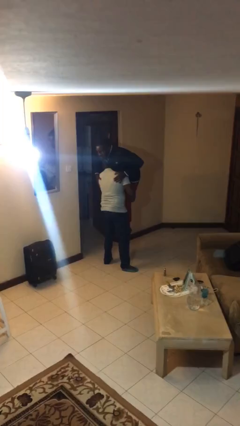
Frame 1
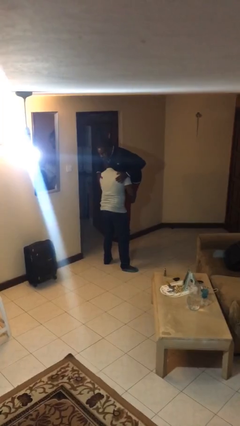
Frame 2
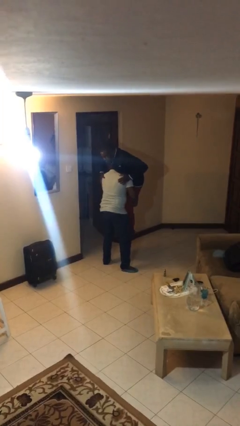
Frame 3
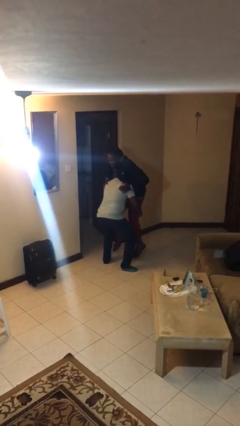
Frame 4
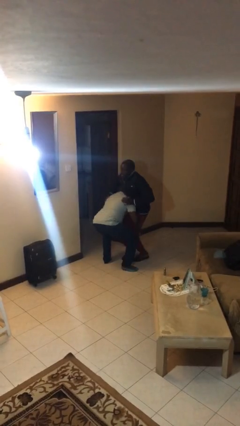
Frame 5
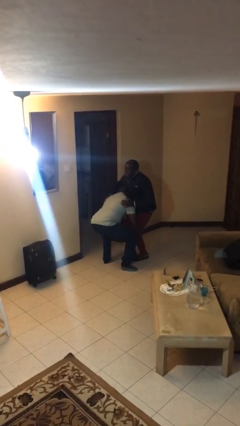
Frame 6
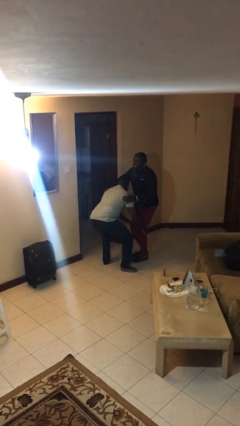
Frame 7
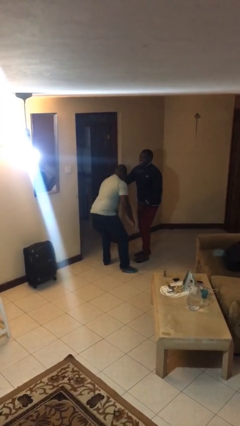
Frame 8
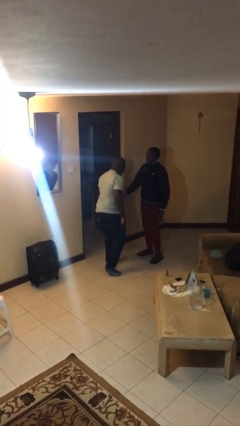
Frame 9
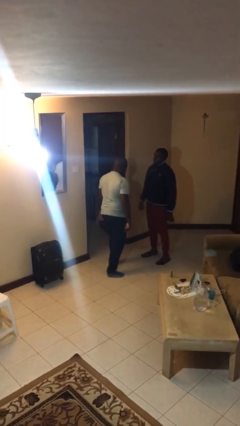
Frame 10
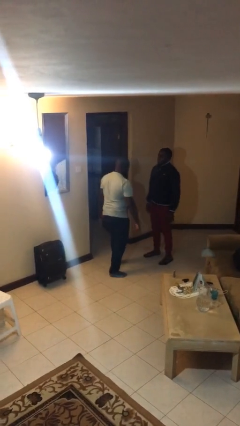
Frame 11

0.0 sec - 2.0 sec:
person puts down person

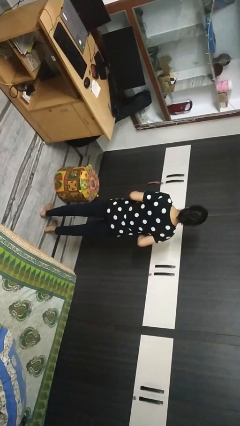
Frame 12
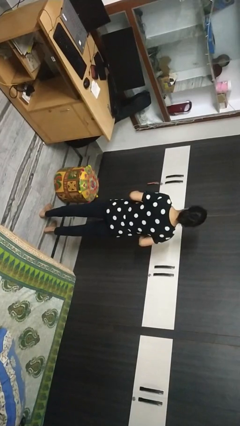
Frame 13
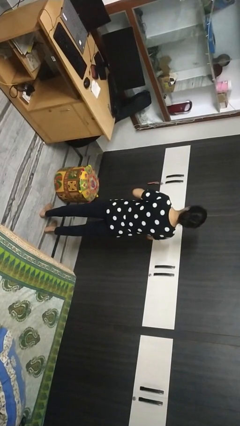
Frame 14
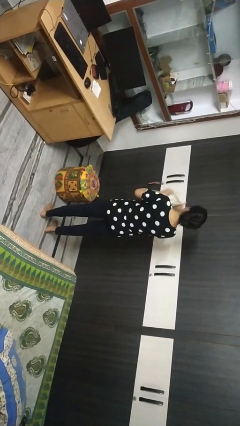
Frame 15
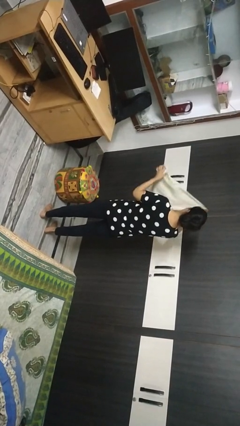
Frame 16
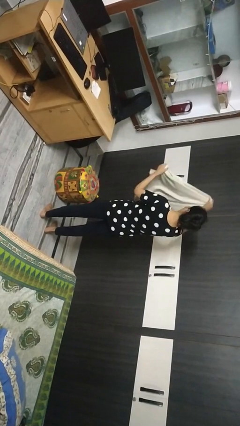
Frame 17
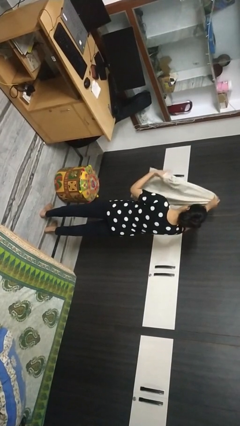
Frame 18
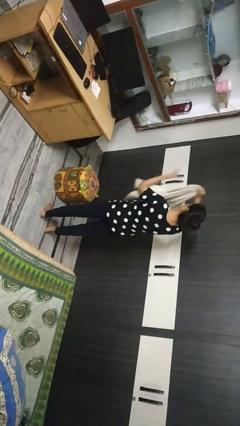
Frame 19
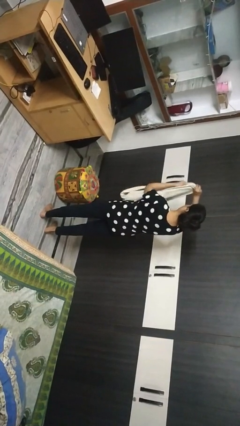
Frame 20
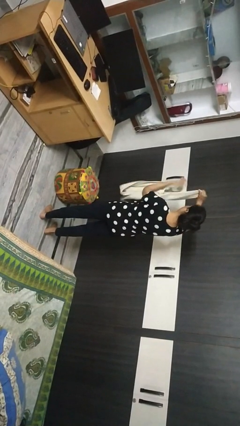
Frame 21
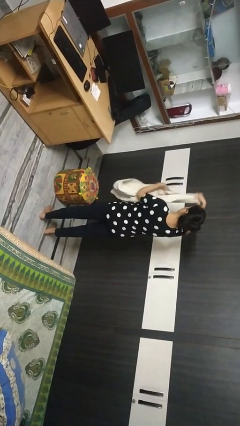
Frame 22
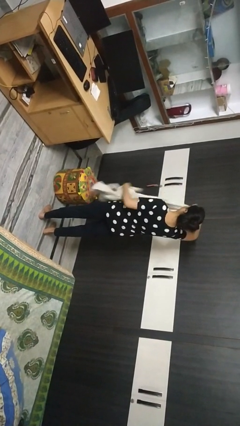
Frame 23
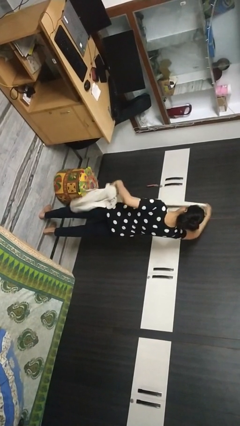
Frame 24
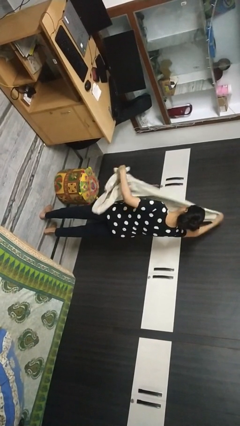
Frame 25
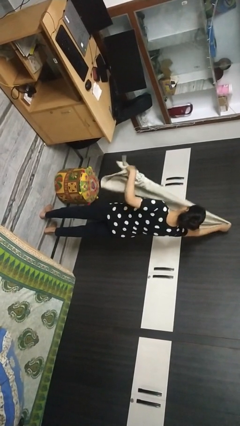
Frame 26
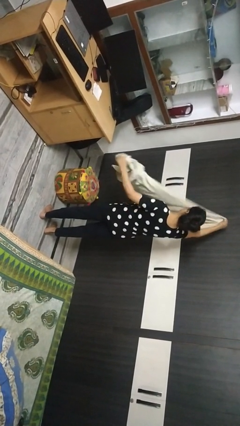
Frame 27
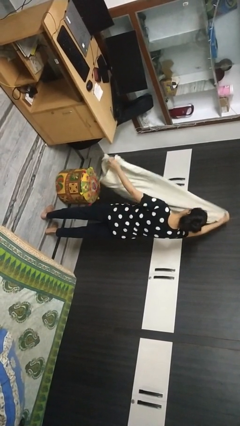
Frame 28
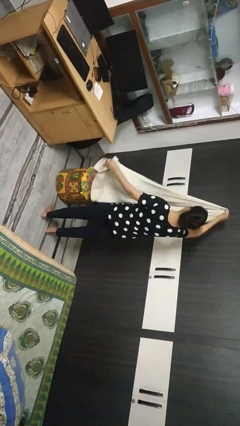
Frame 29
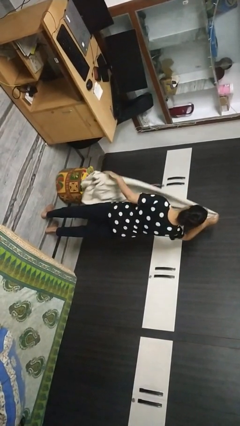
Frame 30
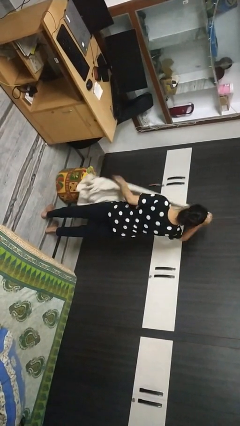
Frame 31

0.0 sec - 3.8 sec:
person unfolds blanket

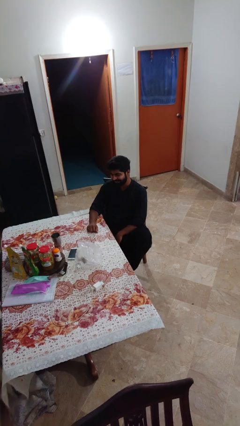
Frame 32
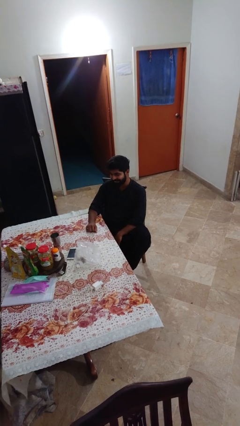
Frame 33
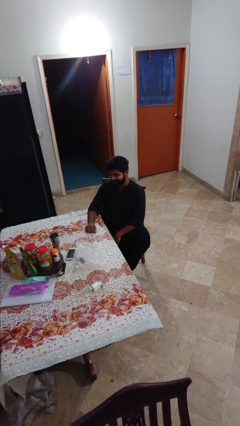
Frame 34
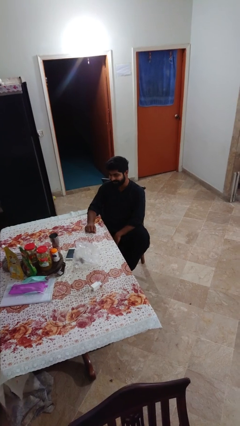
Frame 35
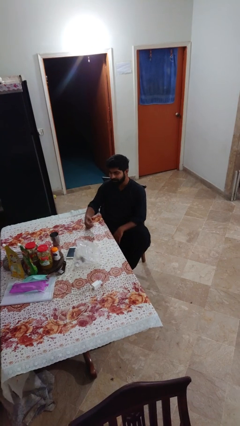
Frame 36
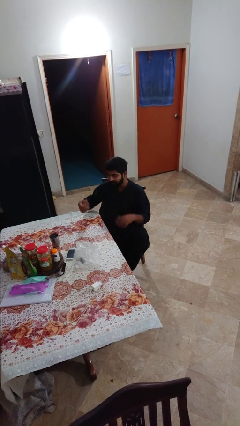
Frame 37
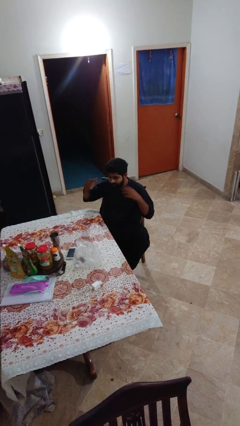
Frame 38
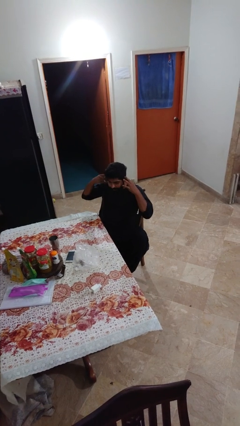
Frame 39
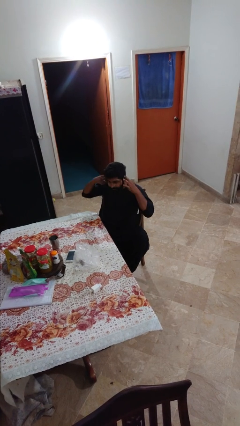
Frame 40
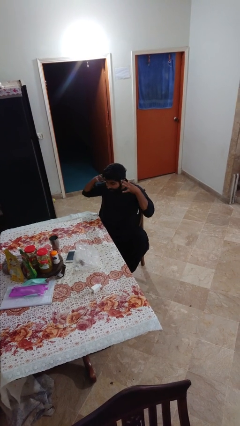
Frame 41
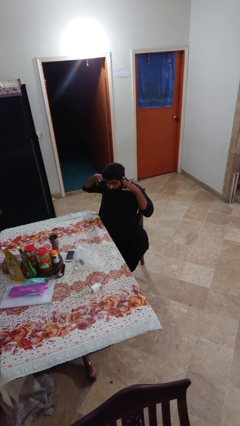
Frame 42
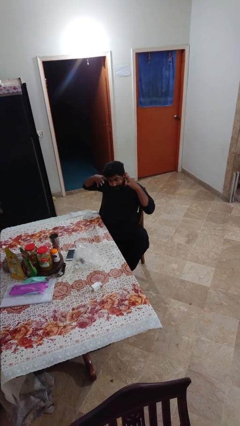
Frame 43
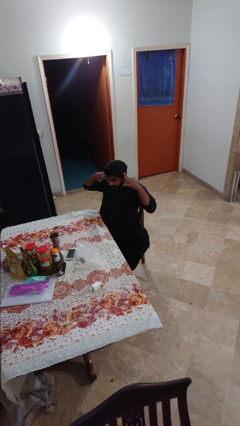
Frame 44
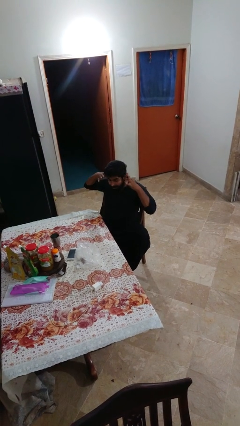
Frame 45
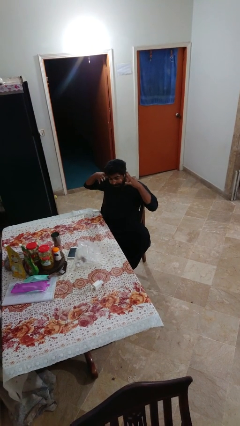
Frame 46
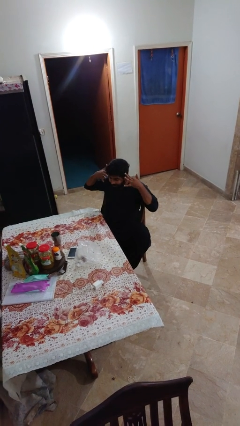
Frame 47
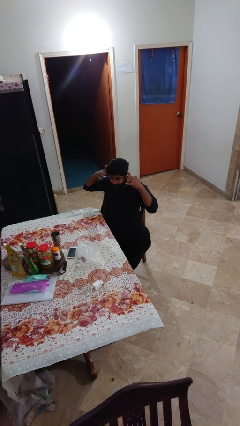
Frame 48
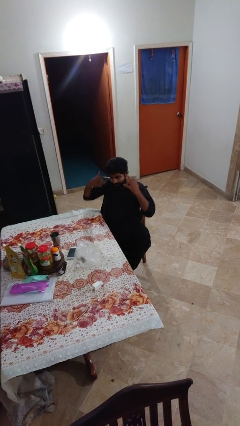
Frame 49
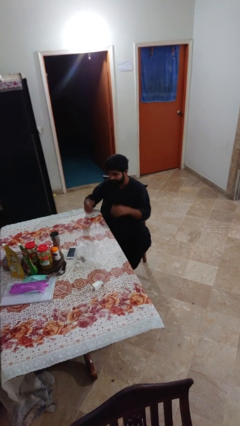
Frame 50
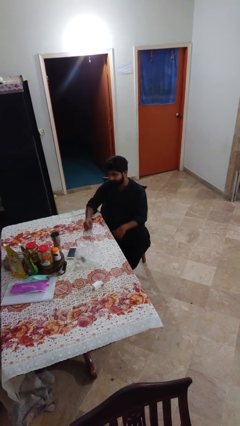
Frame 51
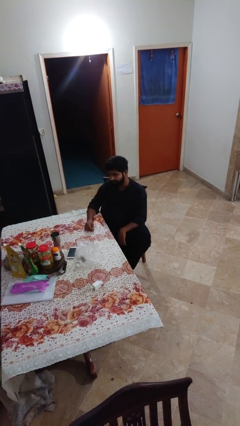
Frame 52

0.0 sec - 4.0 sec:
person puts fingers in ear

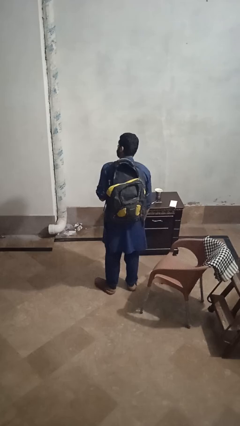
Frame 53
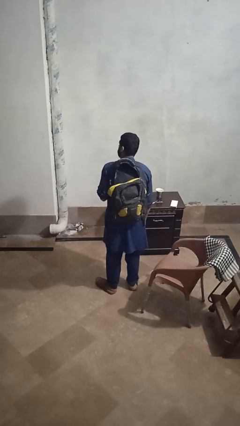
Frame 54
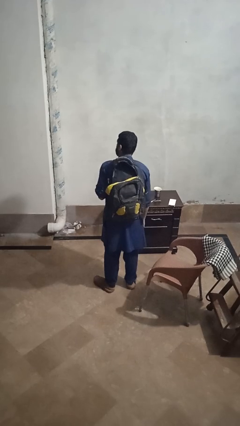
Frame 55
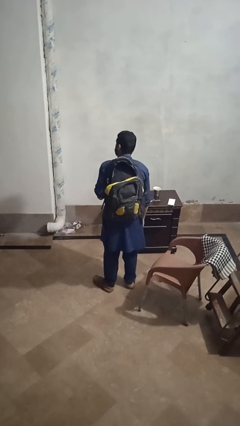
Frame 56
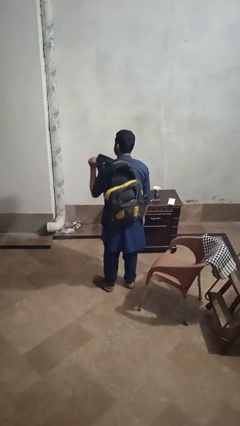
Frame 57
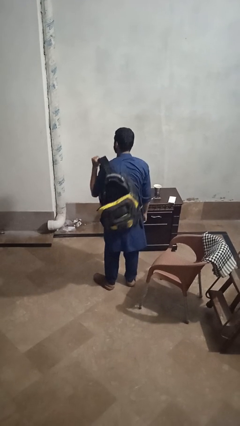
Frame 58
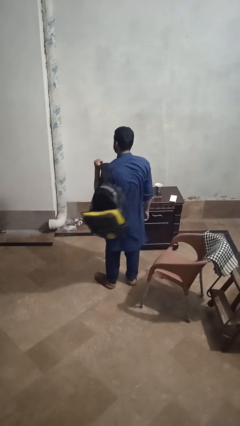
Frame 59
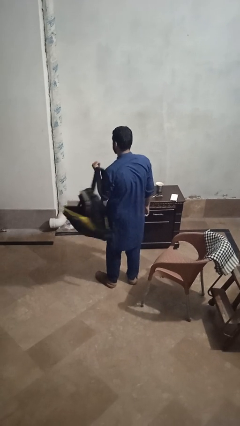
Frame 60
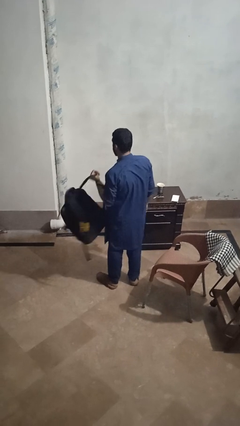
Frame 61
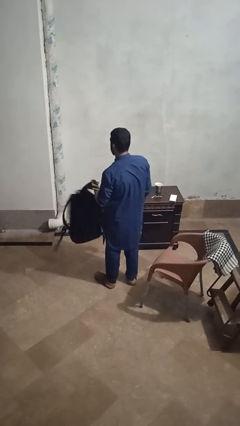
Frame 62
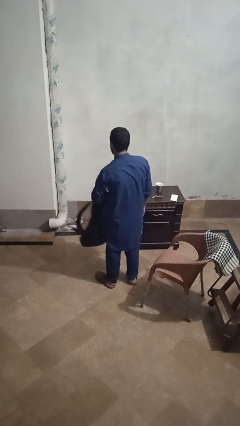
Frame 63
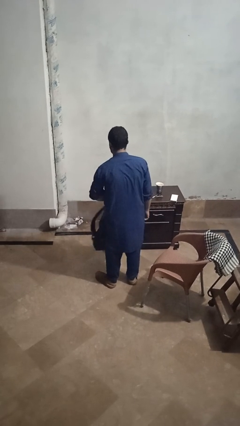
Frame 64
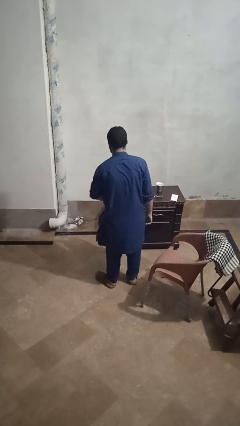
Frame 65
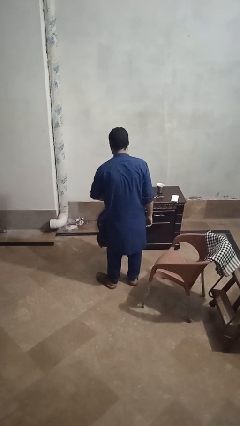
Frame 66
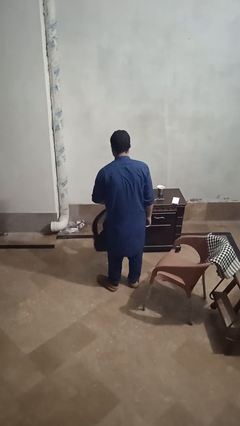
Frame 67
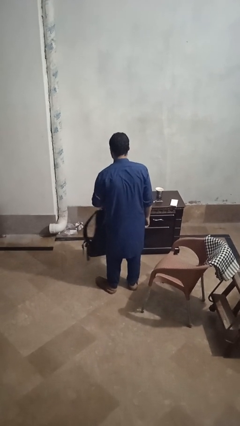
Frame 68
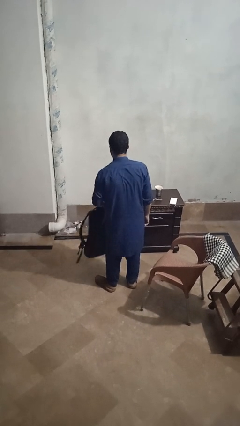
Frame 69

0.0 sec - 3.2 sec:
person takes off backpack

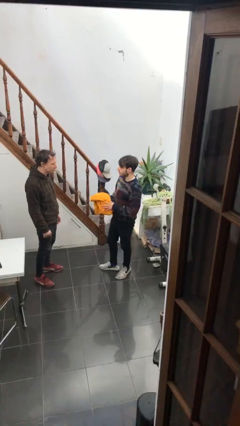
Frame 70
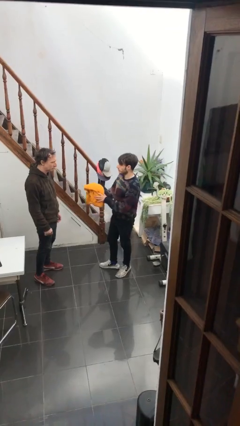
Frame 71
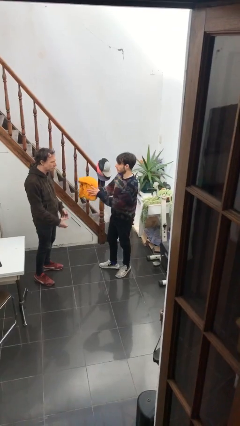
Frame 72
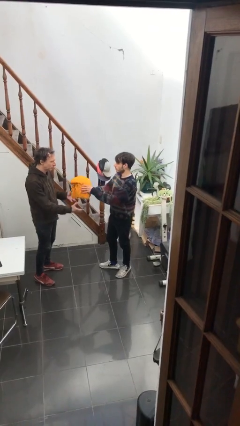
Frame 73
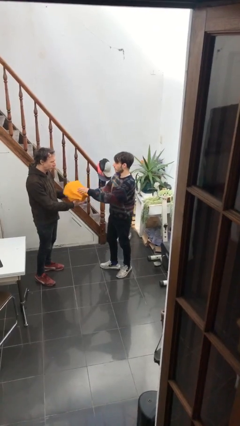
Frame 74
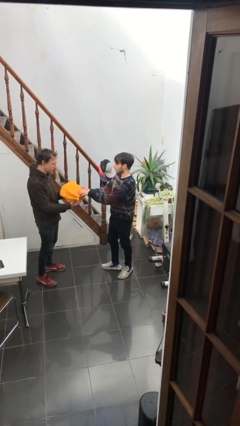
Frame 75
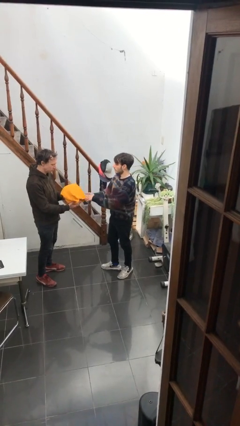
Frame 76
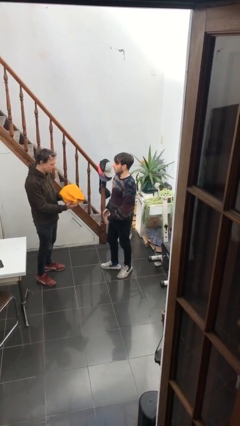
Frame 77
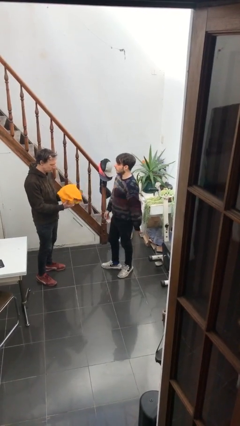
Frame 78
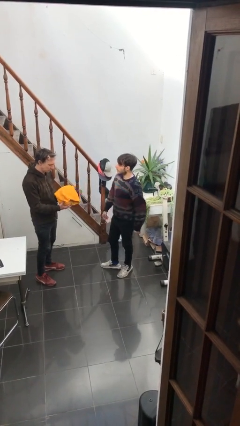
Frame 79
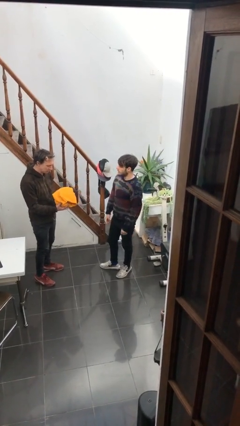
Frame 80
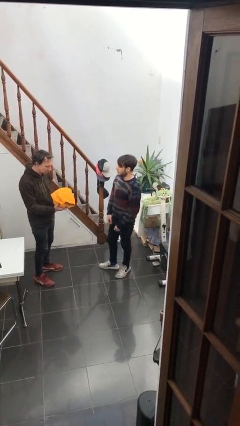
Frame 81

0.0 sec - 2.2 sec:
person transfers object to person

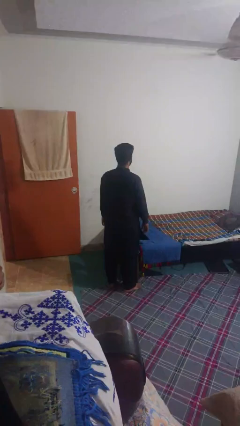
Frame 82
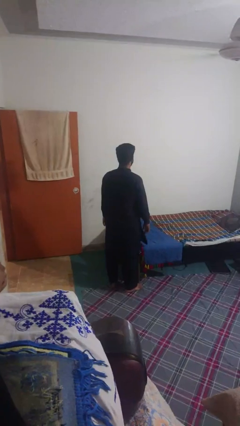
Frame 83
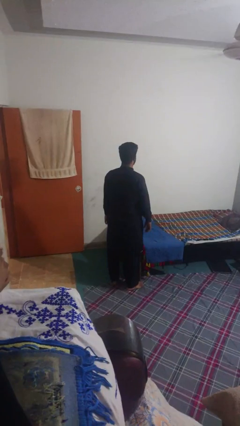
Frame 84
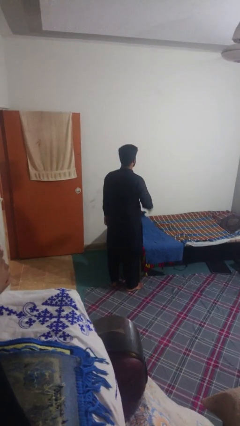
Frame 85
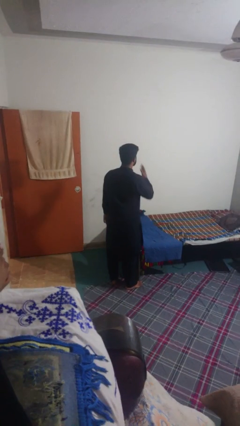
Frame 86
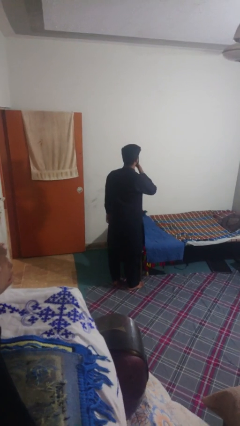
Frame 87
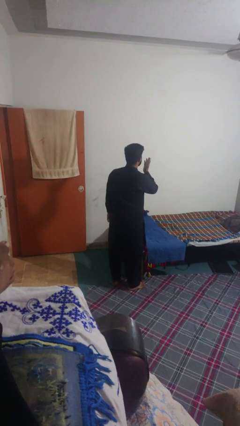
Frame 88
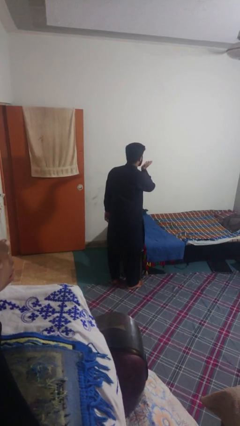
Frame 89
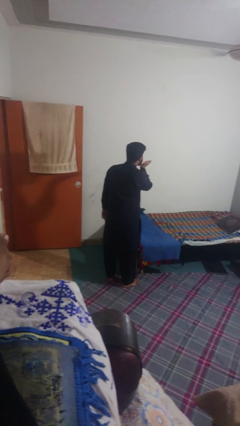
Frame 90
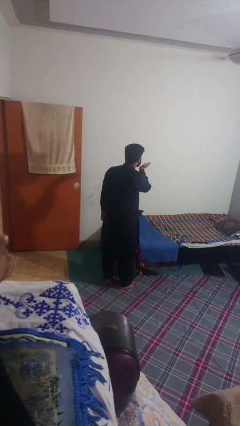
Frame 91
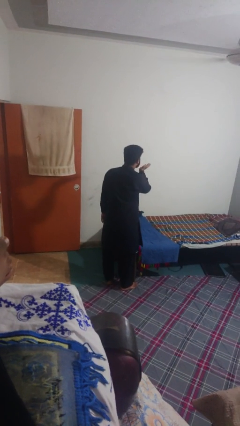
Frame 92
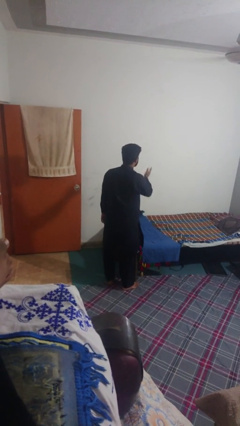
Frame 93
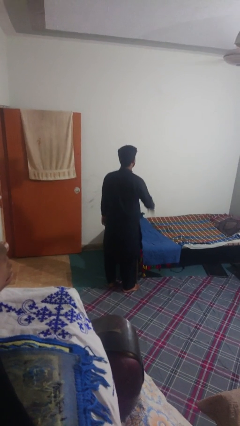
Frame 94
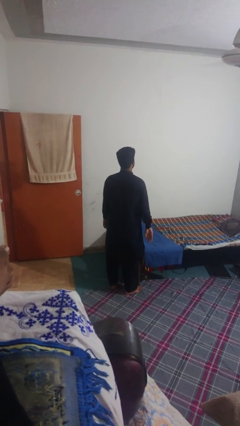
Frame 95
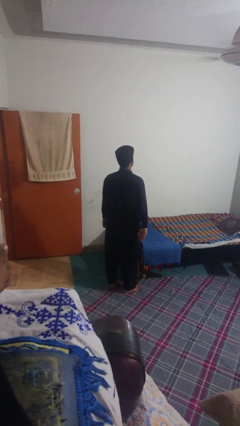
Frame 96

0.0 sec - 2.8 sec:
person gestures blow kiss
